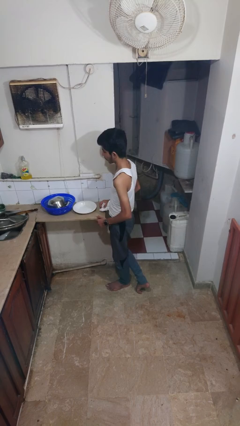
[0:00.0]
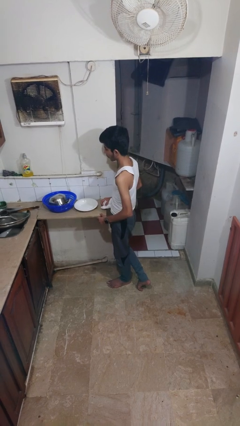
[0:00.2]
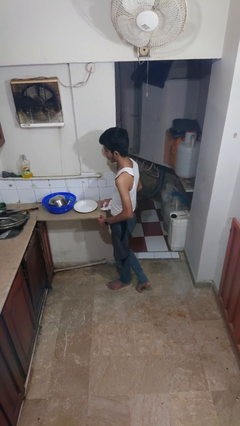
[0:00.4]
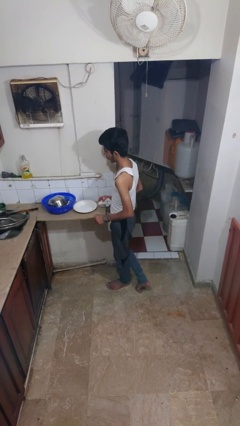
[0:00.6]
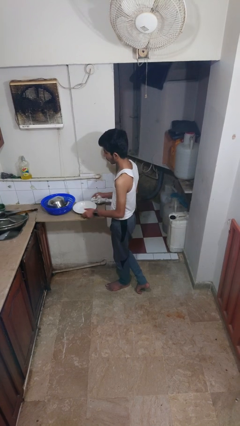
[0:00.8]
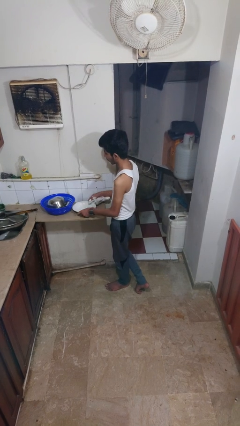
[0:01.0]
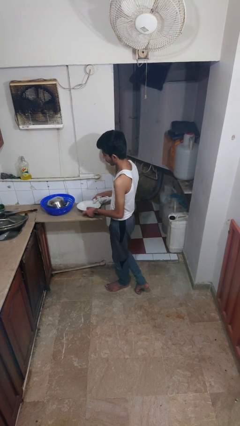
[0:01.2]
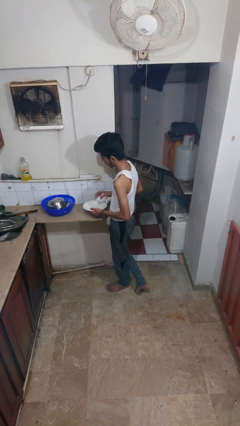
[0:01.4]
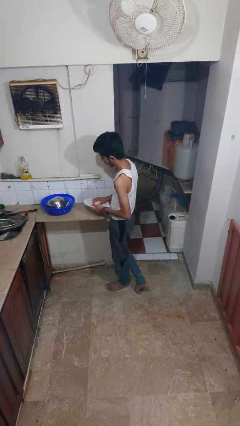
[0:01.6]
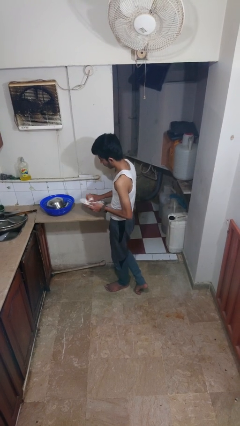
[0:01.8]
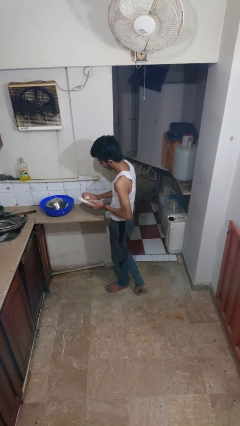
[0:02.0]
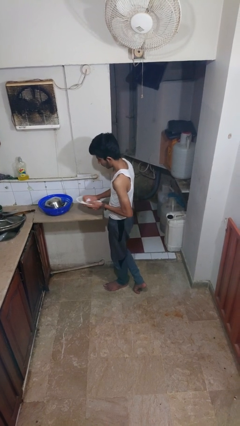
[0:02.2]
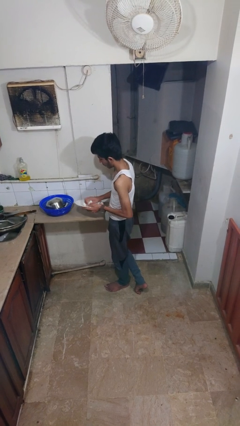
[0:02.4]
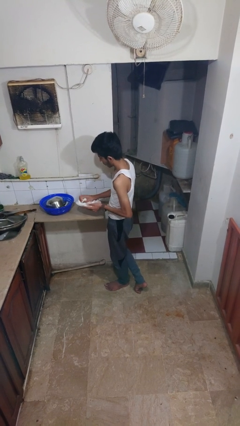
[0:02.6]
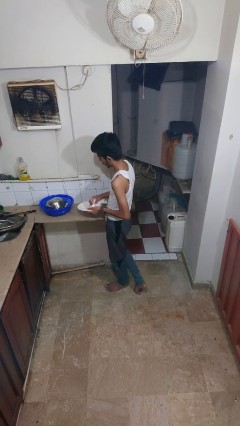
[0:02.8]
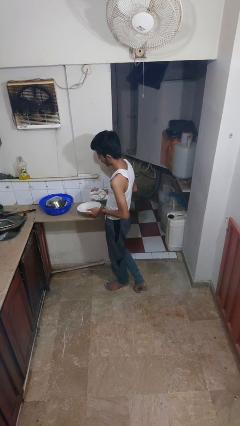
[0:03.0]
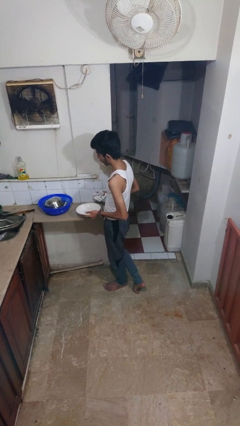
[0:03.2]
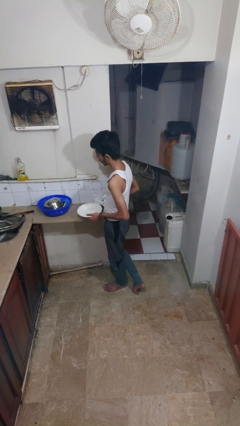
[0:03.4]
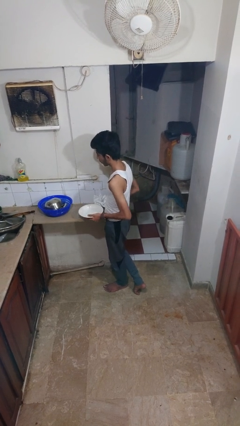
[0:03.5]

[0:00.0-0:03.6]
person dries dish

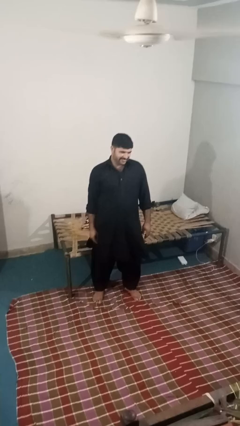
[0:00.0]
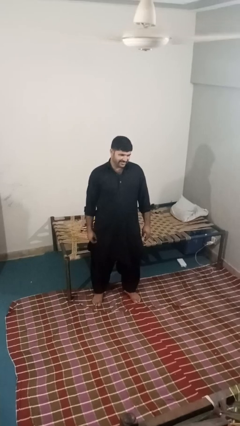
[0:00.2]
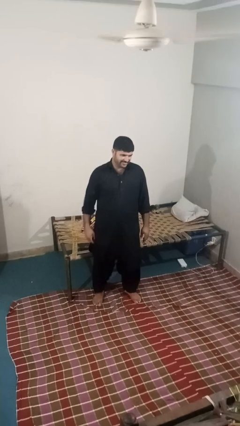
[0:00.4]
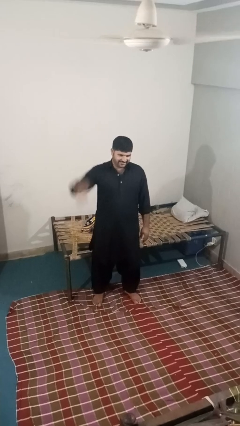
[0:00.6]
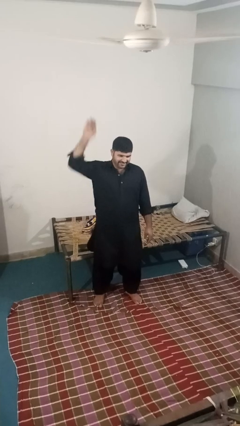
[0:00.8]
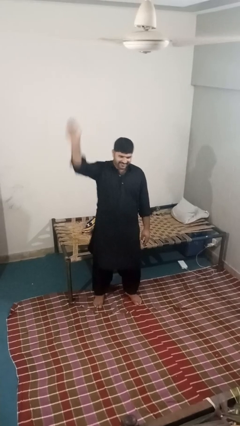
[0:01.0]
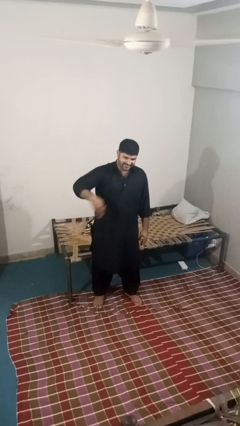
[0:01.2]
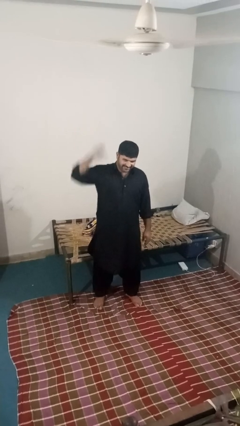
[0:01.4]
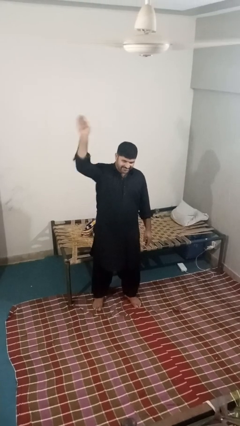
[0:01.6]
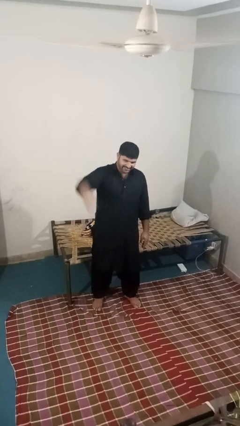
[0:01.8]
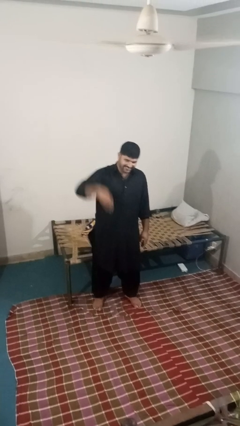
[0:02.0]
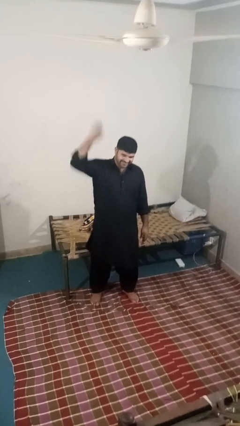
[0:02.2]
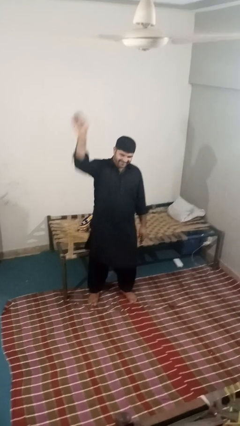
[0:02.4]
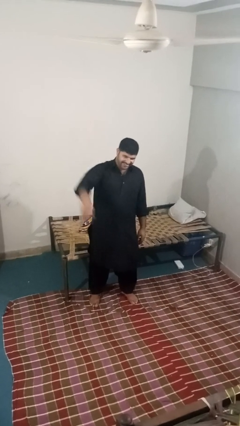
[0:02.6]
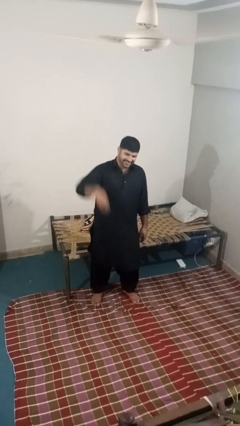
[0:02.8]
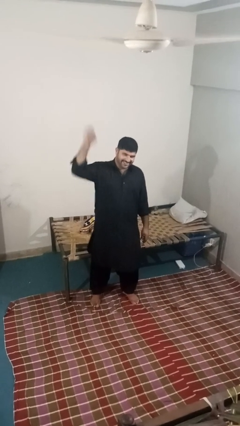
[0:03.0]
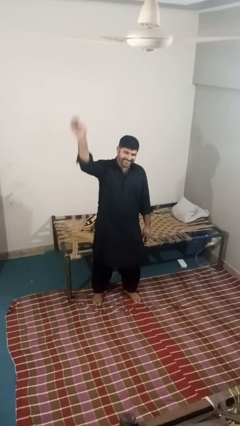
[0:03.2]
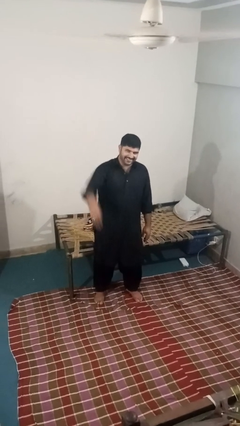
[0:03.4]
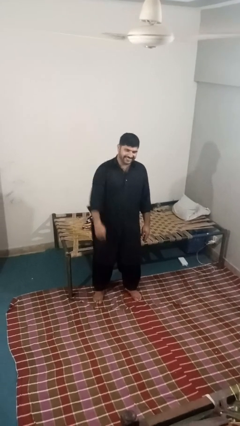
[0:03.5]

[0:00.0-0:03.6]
person gestures come here

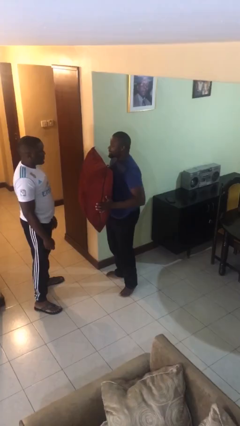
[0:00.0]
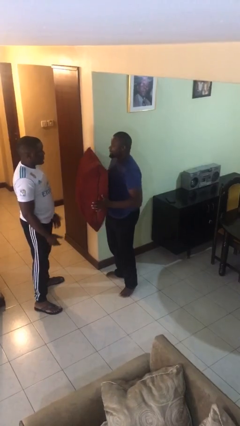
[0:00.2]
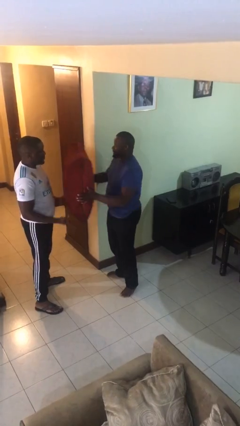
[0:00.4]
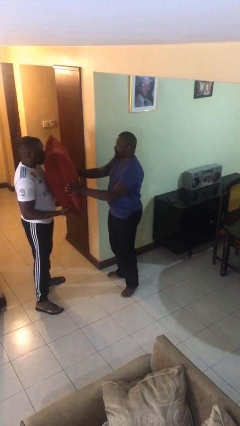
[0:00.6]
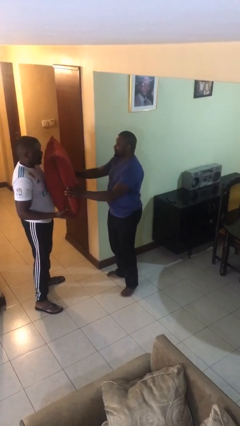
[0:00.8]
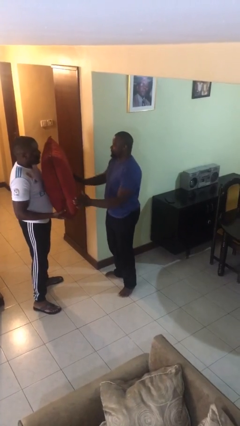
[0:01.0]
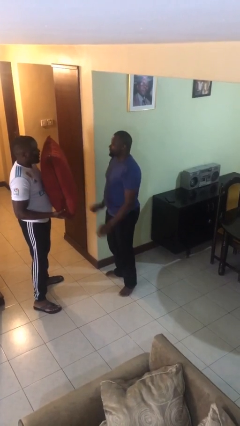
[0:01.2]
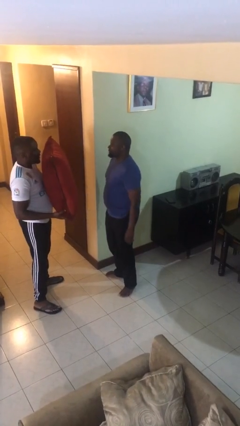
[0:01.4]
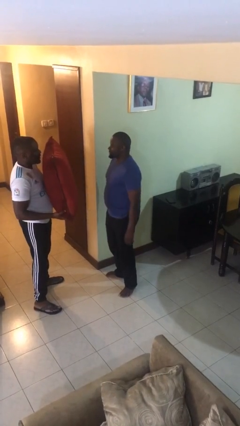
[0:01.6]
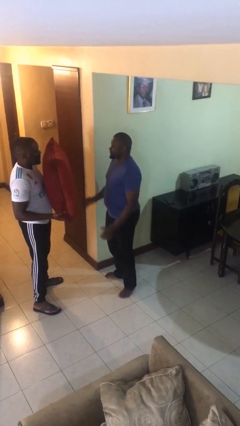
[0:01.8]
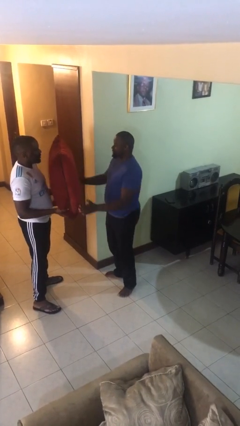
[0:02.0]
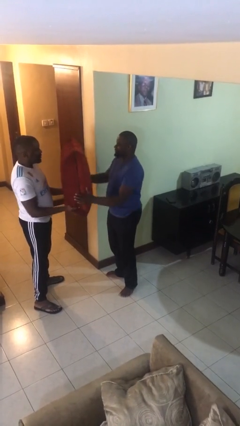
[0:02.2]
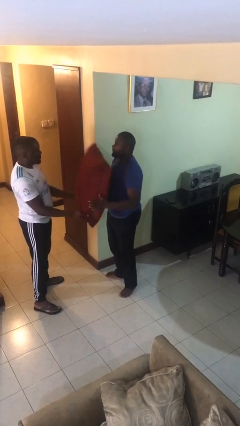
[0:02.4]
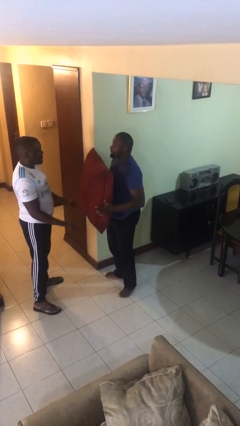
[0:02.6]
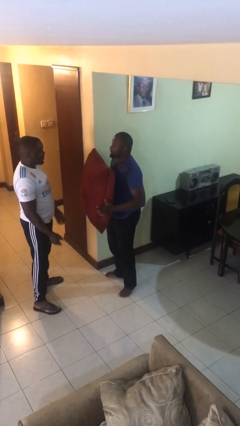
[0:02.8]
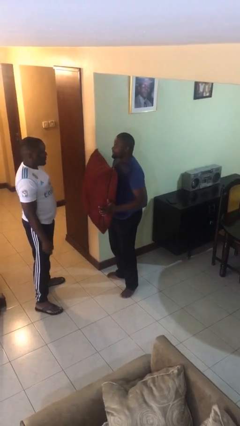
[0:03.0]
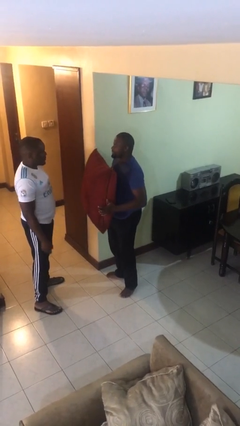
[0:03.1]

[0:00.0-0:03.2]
person transfers object to person

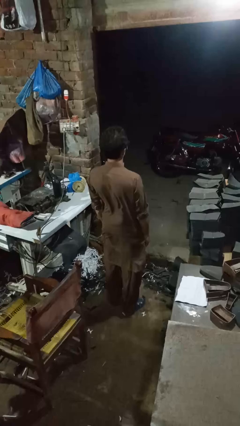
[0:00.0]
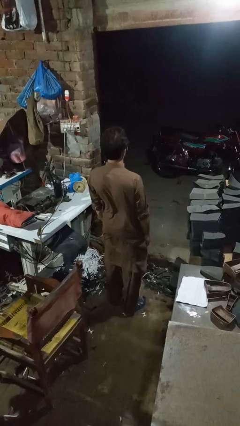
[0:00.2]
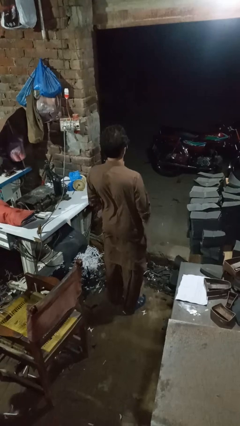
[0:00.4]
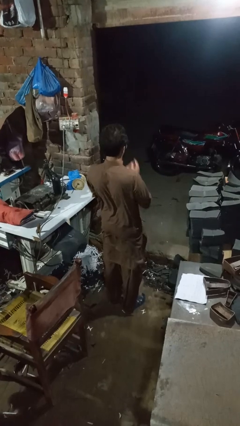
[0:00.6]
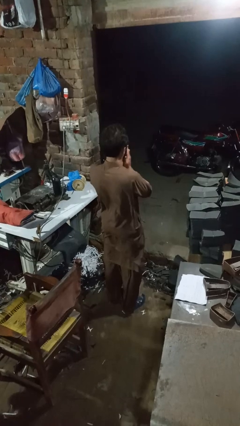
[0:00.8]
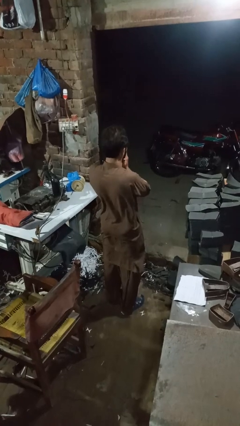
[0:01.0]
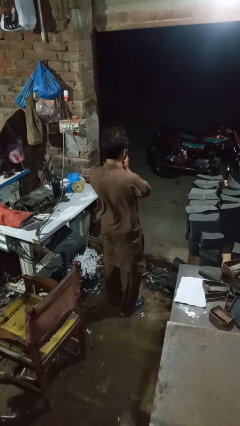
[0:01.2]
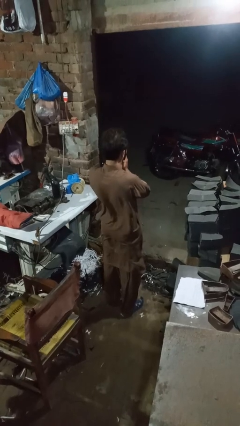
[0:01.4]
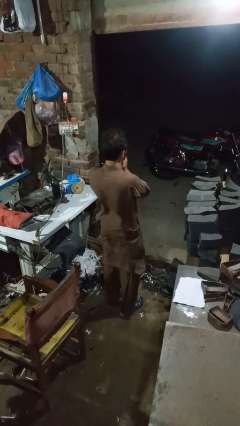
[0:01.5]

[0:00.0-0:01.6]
person sneezes into hand

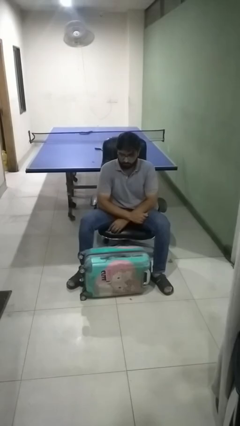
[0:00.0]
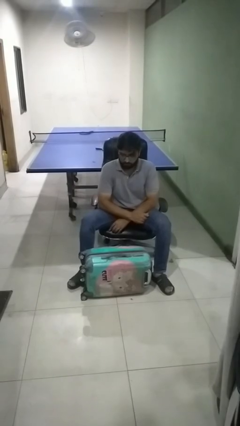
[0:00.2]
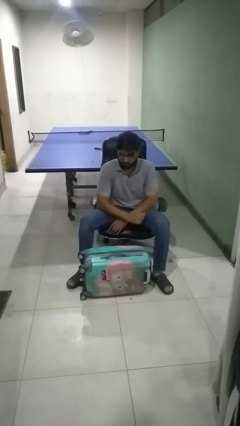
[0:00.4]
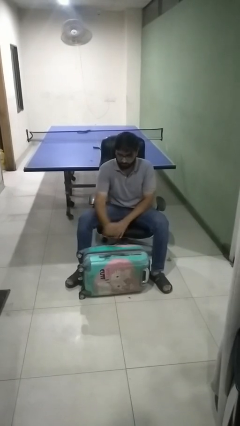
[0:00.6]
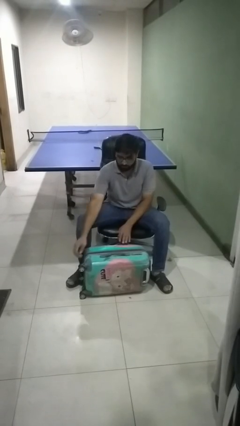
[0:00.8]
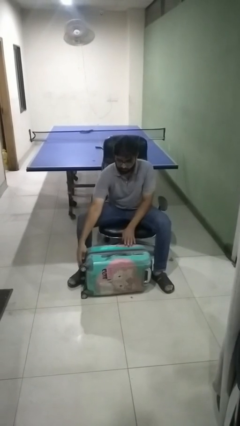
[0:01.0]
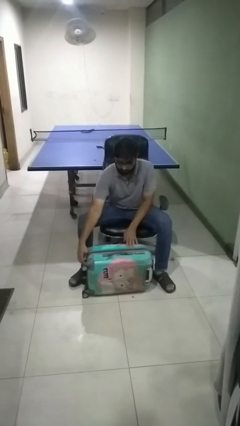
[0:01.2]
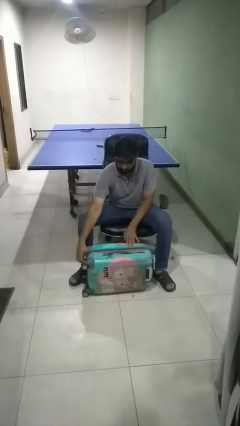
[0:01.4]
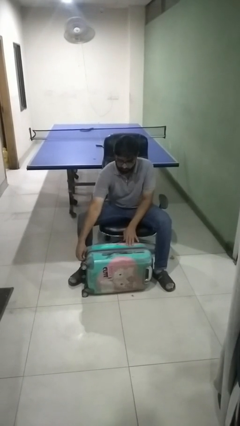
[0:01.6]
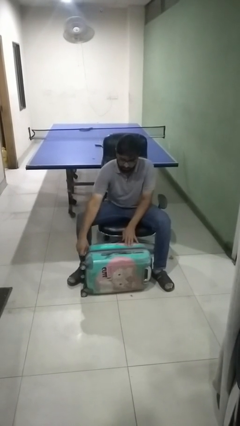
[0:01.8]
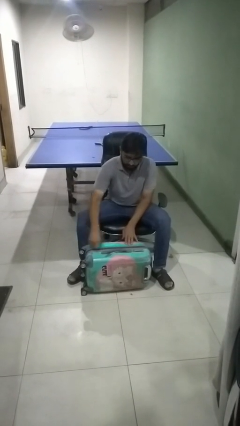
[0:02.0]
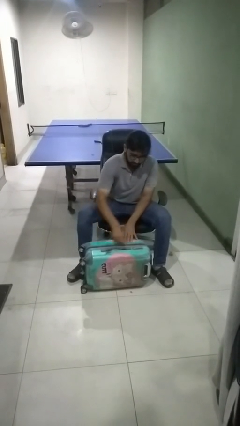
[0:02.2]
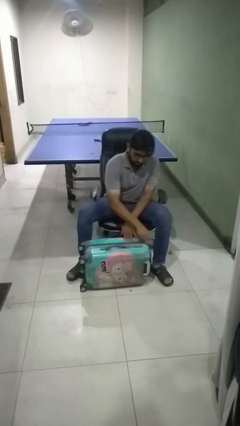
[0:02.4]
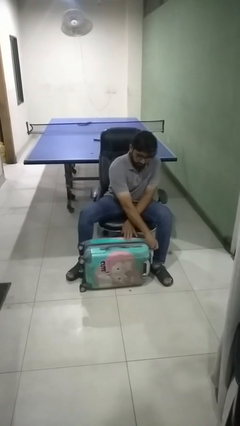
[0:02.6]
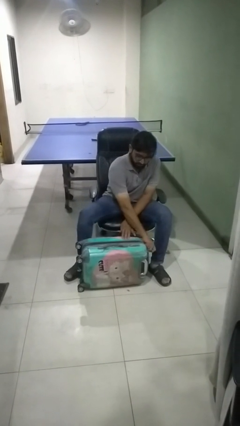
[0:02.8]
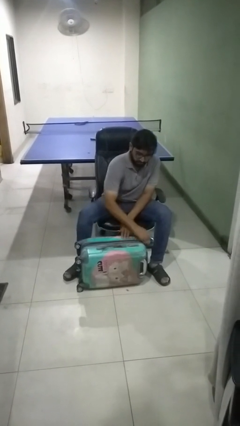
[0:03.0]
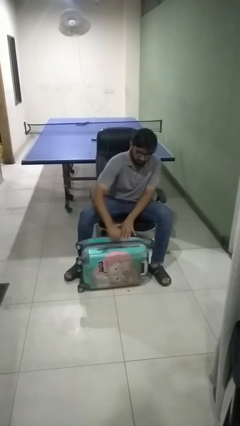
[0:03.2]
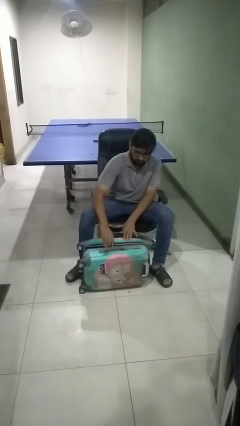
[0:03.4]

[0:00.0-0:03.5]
person opens suitcase

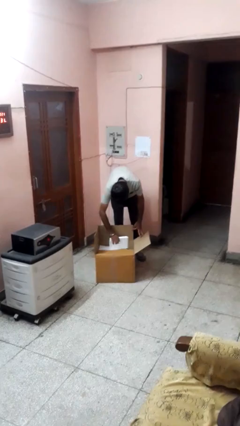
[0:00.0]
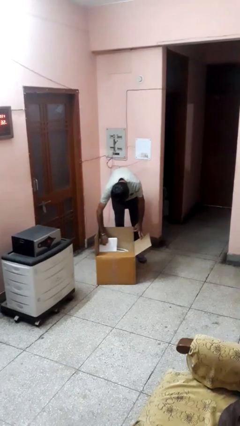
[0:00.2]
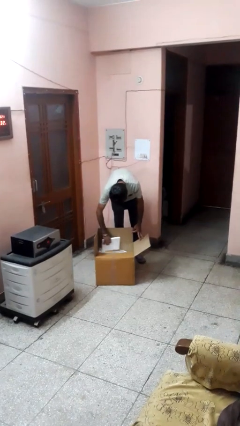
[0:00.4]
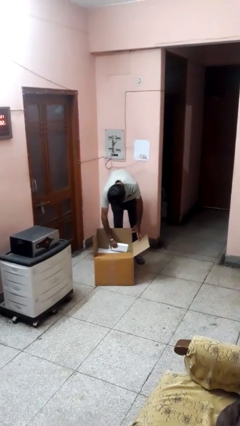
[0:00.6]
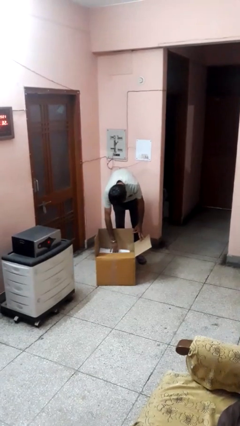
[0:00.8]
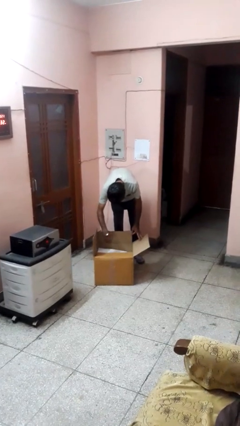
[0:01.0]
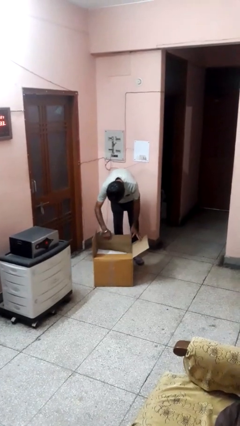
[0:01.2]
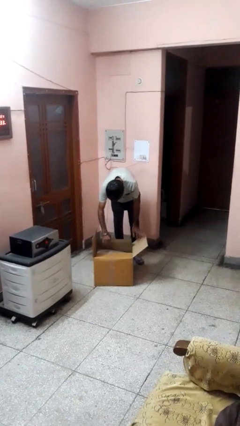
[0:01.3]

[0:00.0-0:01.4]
person searches in box

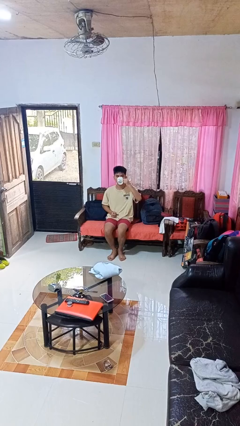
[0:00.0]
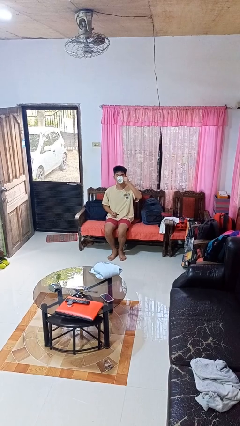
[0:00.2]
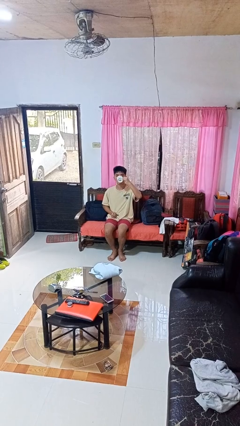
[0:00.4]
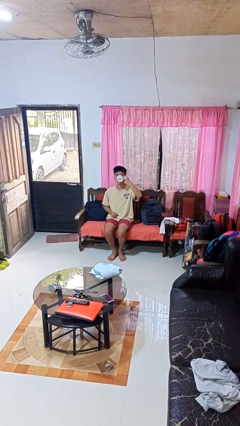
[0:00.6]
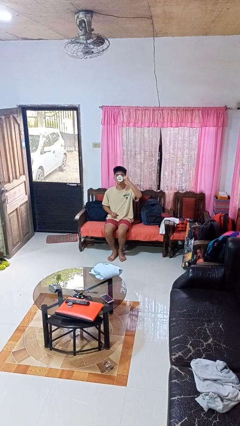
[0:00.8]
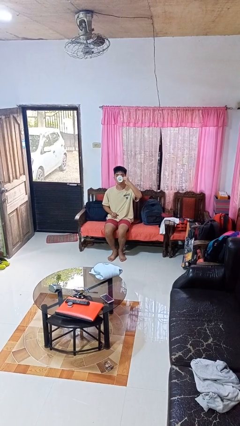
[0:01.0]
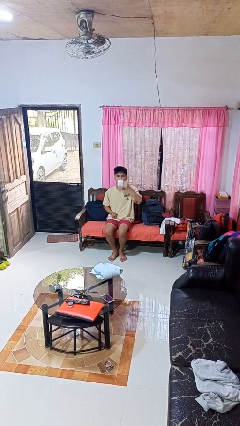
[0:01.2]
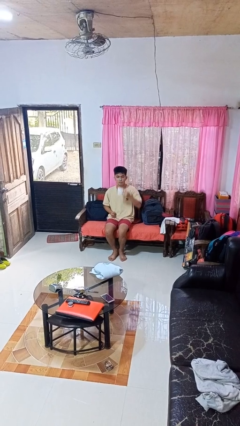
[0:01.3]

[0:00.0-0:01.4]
person drinks from mug
